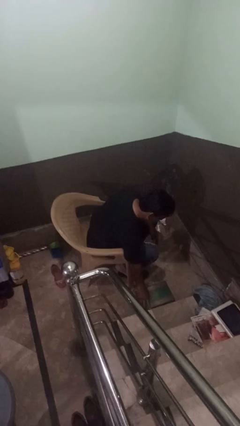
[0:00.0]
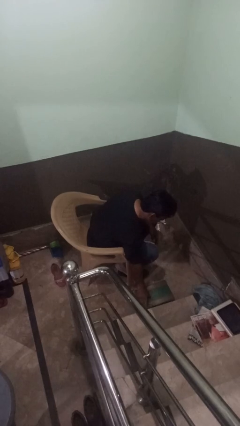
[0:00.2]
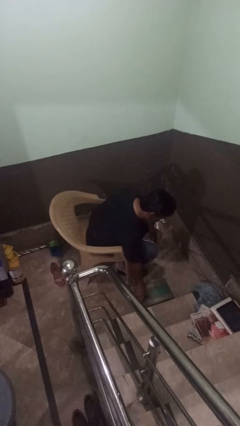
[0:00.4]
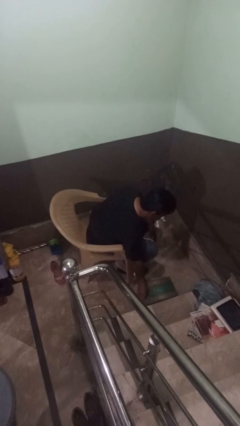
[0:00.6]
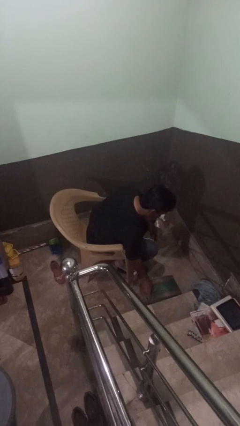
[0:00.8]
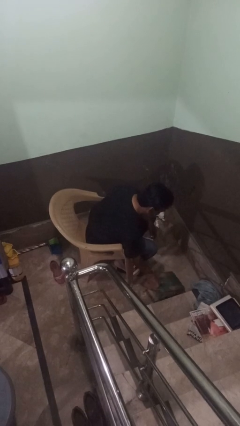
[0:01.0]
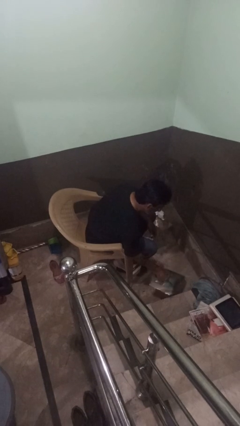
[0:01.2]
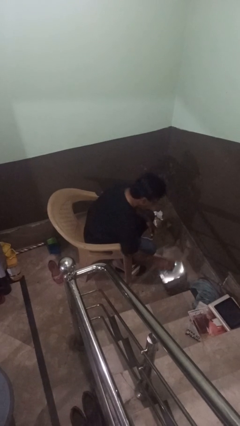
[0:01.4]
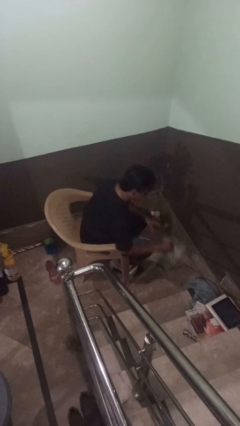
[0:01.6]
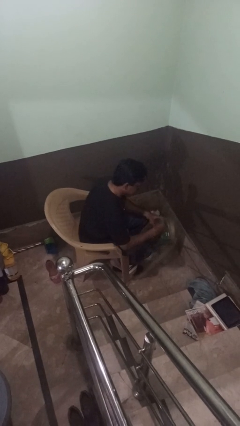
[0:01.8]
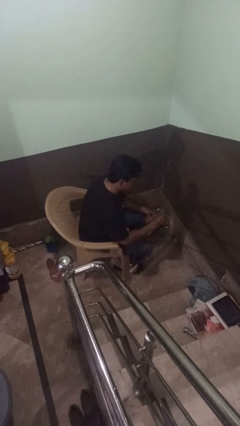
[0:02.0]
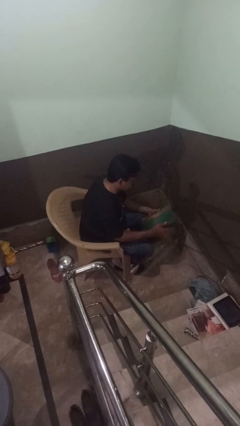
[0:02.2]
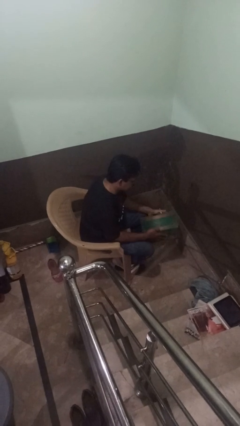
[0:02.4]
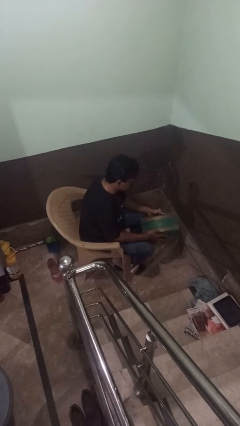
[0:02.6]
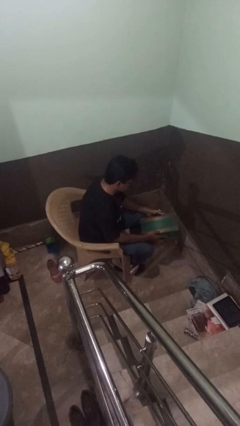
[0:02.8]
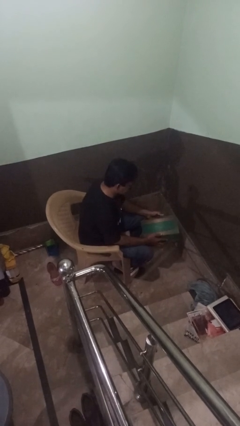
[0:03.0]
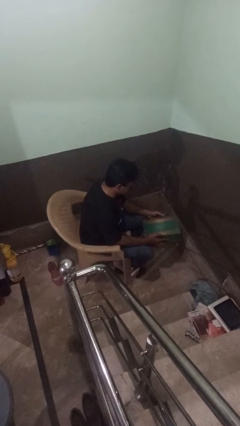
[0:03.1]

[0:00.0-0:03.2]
person picks up object from floor

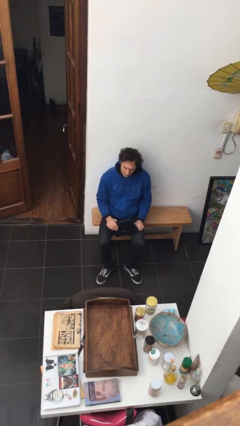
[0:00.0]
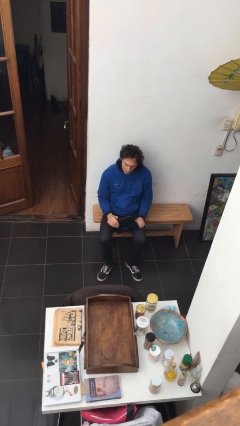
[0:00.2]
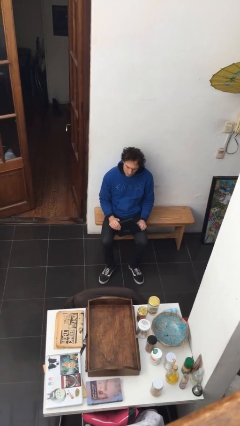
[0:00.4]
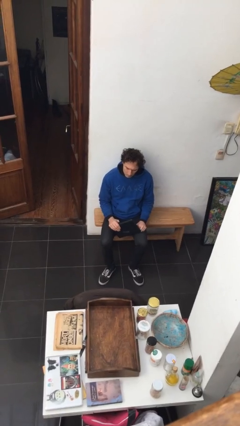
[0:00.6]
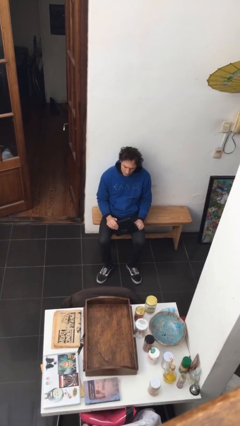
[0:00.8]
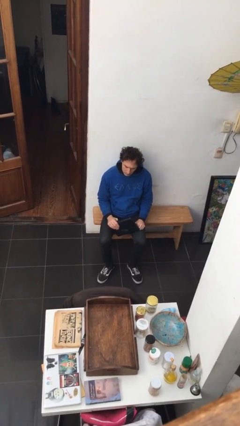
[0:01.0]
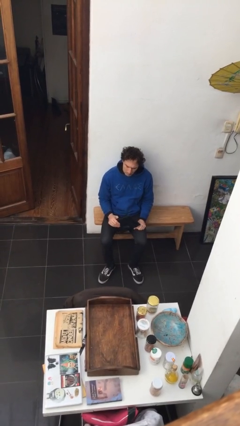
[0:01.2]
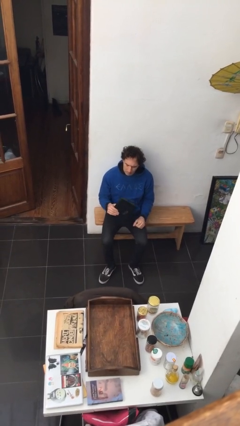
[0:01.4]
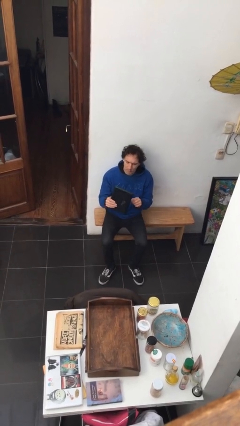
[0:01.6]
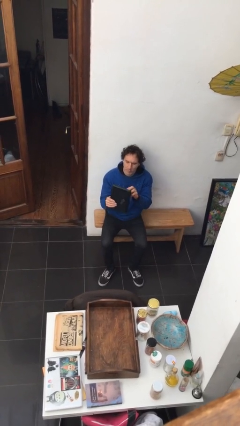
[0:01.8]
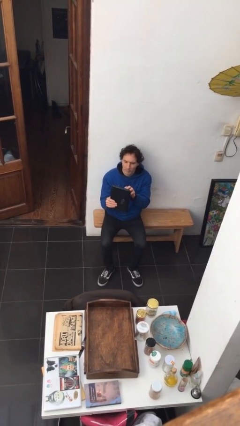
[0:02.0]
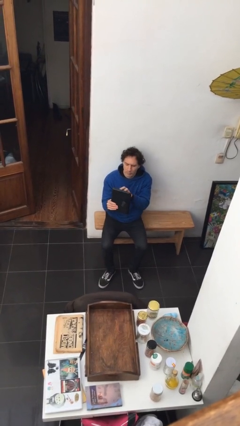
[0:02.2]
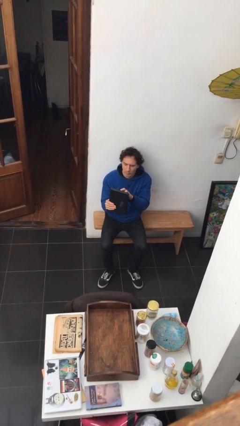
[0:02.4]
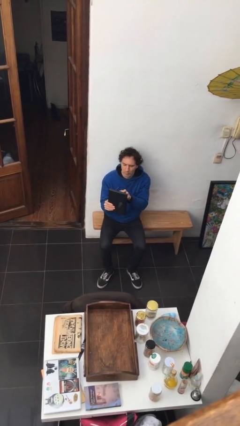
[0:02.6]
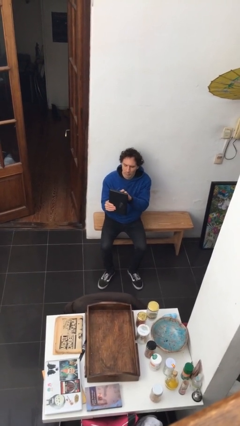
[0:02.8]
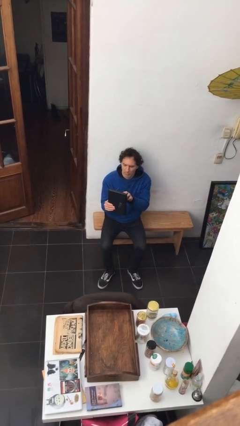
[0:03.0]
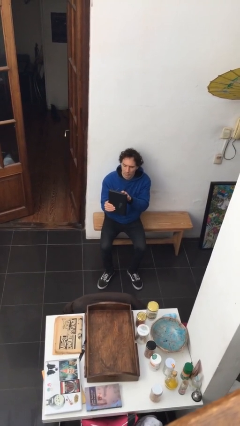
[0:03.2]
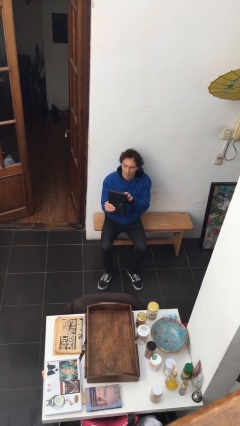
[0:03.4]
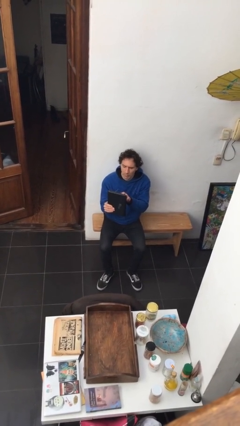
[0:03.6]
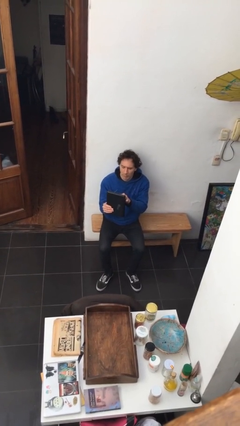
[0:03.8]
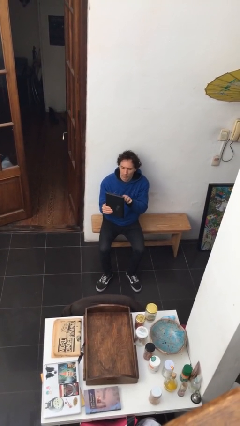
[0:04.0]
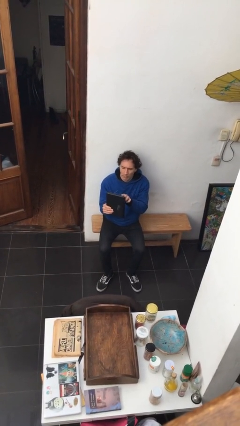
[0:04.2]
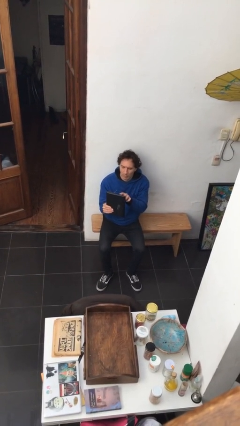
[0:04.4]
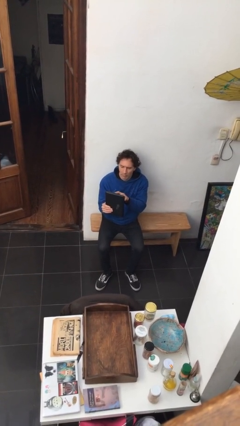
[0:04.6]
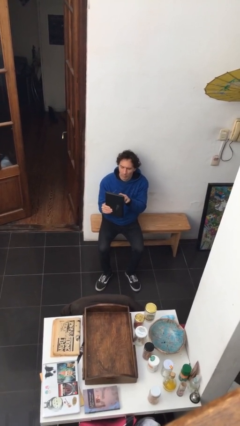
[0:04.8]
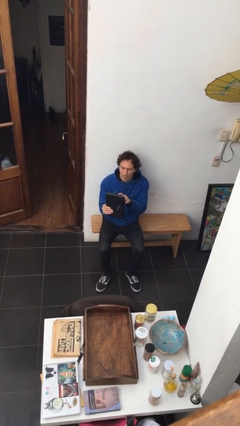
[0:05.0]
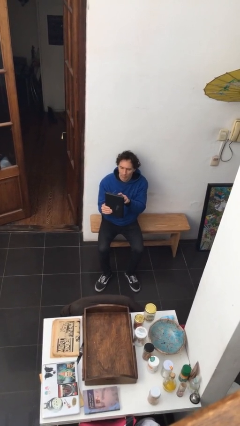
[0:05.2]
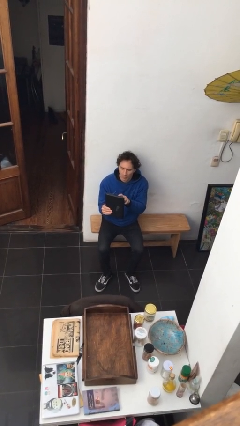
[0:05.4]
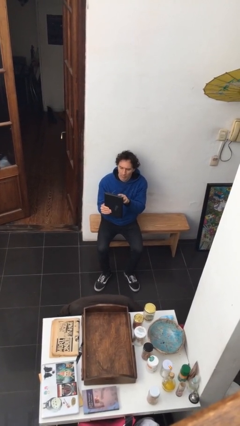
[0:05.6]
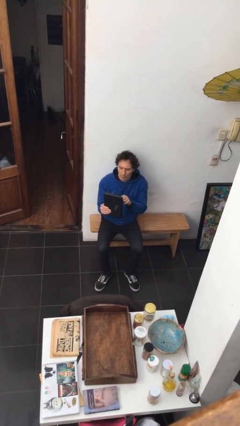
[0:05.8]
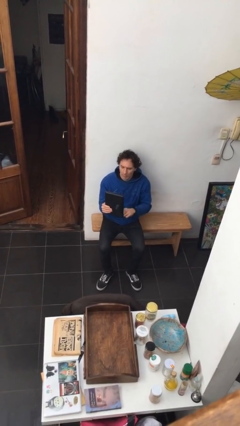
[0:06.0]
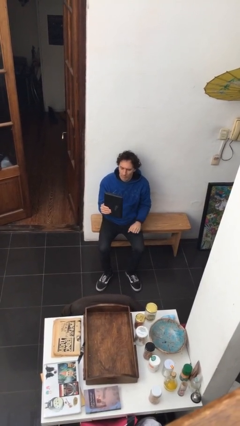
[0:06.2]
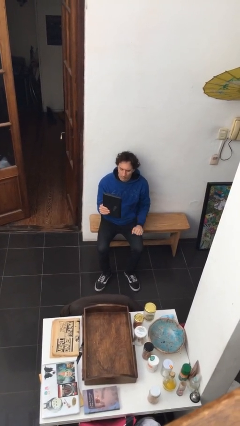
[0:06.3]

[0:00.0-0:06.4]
person interacts with tablet

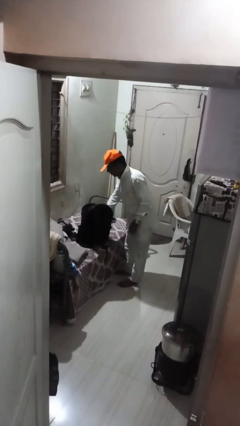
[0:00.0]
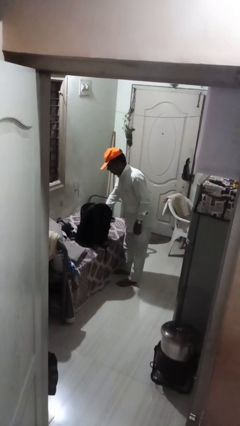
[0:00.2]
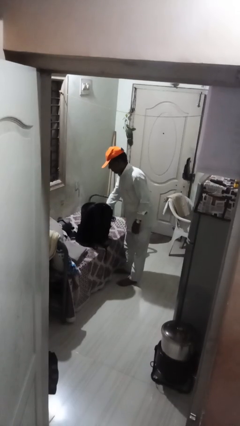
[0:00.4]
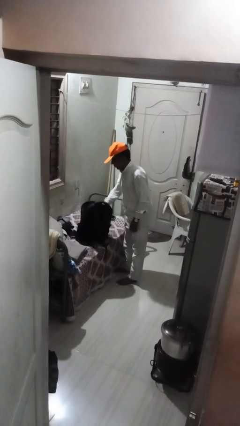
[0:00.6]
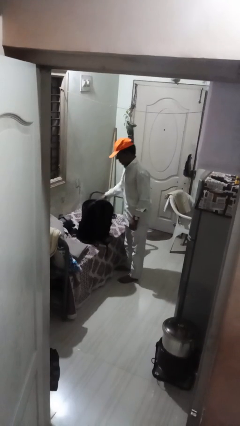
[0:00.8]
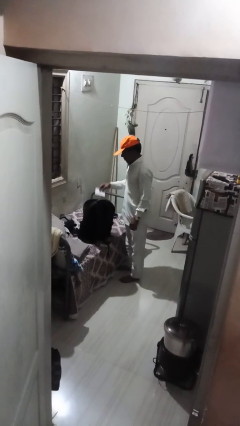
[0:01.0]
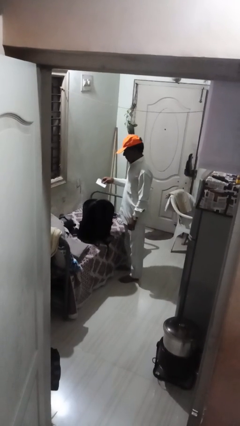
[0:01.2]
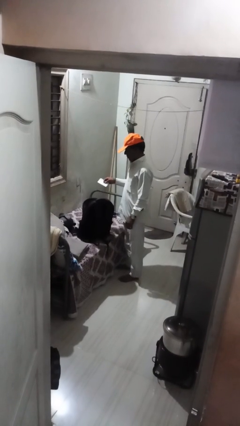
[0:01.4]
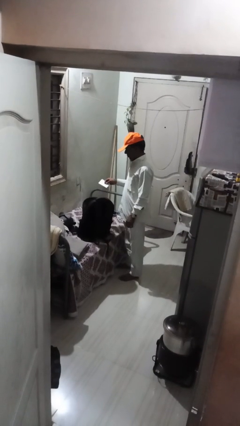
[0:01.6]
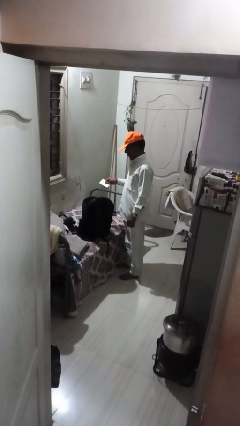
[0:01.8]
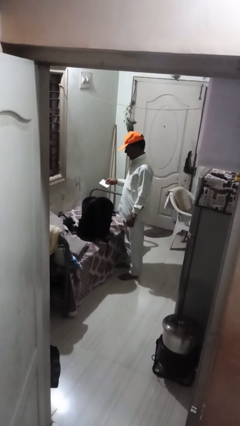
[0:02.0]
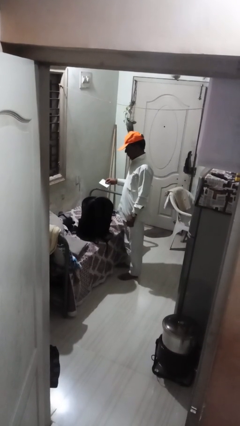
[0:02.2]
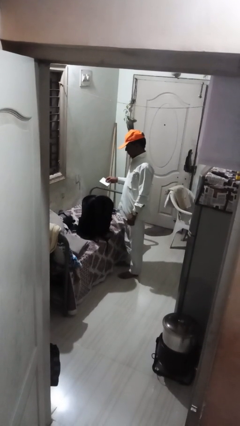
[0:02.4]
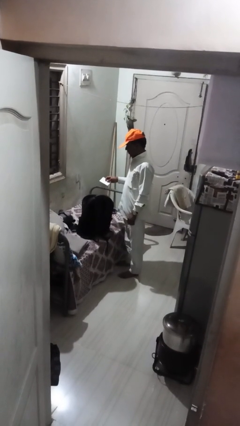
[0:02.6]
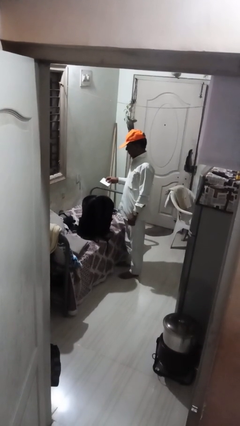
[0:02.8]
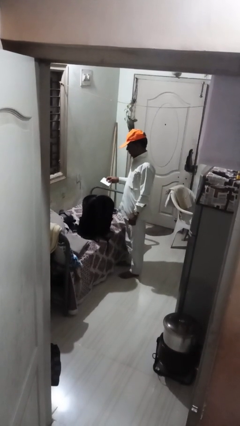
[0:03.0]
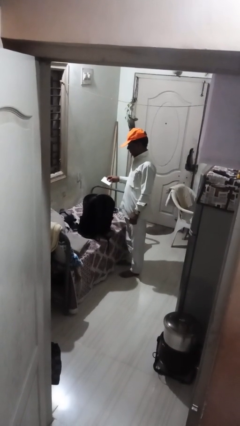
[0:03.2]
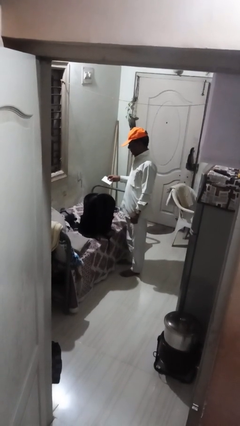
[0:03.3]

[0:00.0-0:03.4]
person takes object from backpack

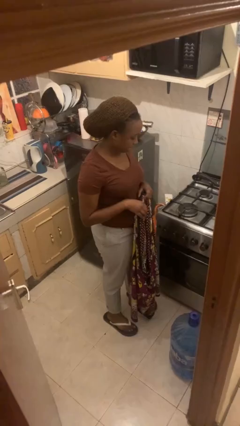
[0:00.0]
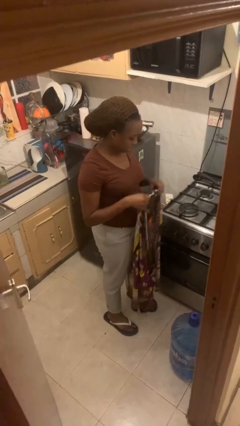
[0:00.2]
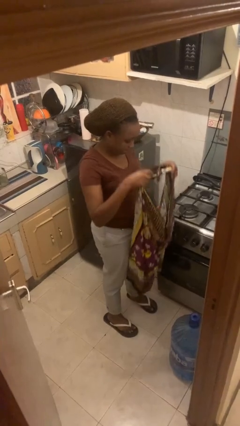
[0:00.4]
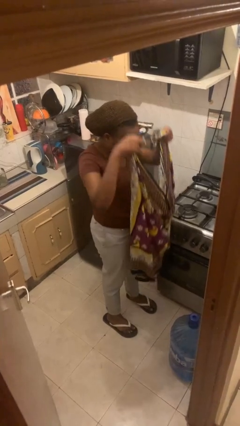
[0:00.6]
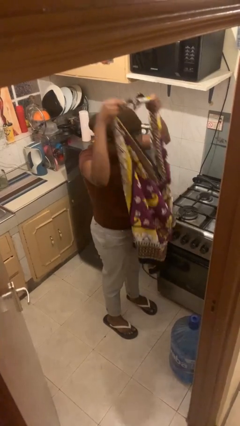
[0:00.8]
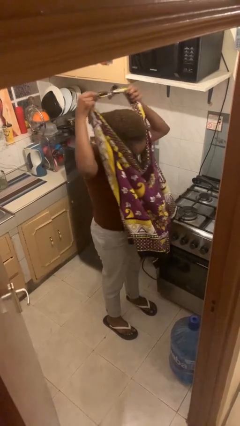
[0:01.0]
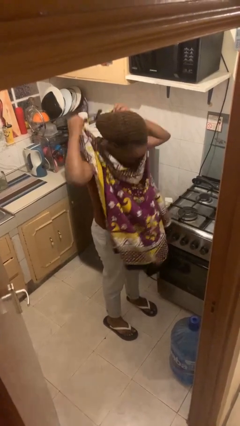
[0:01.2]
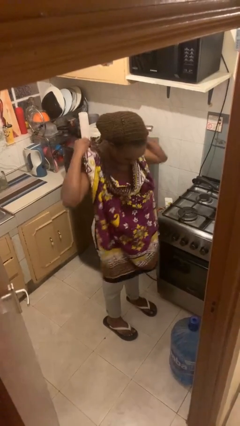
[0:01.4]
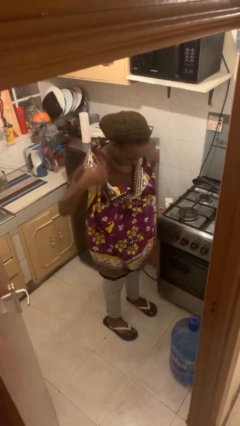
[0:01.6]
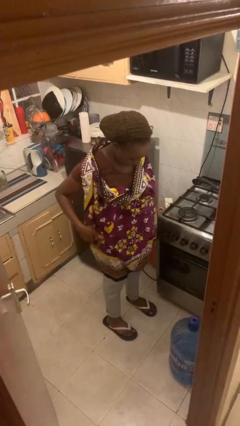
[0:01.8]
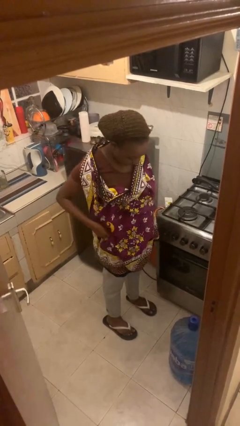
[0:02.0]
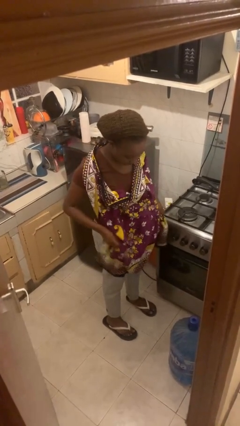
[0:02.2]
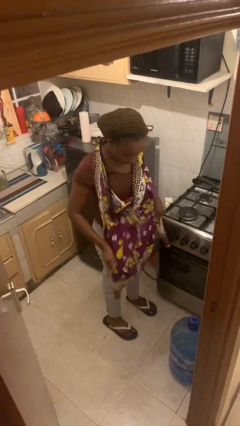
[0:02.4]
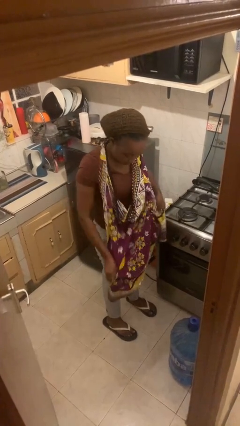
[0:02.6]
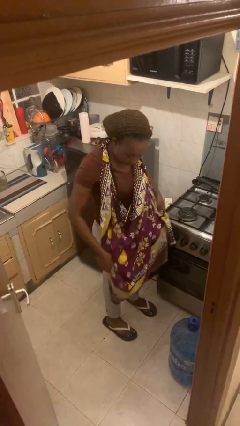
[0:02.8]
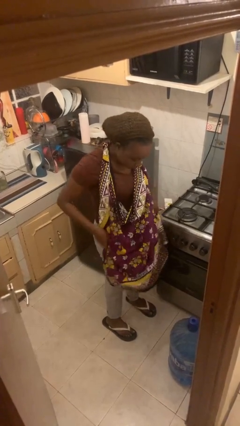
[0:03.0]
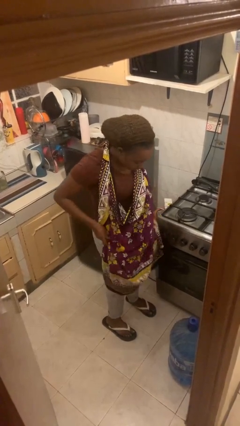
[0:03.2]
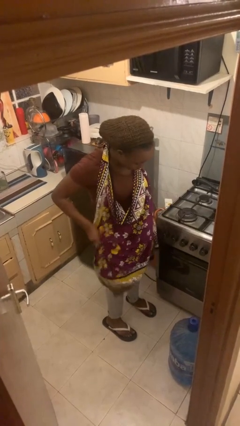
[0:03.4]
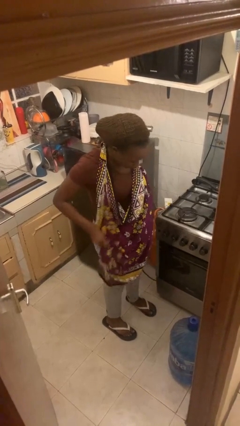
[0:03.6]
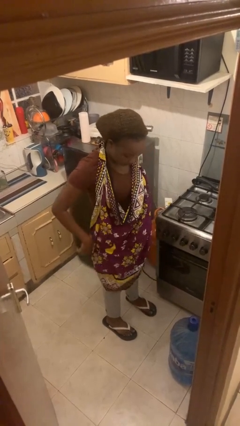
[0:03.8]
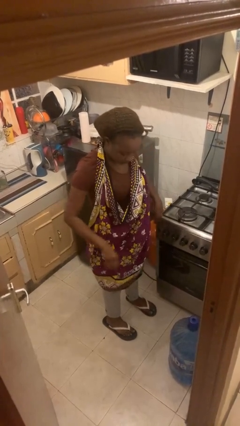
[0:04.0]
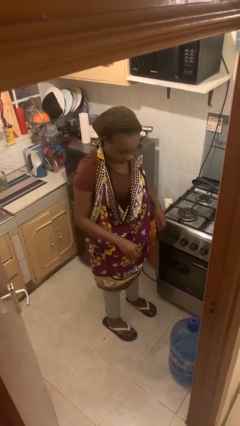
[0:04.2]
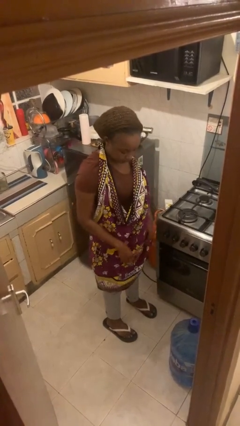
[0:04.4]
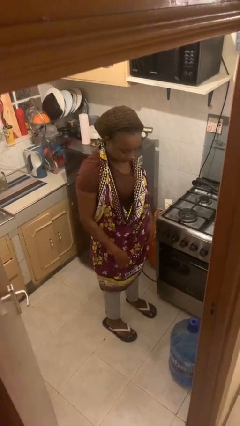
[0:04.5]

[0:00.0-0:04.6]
person puts on apron

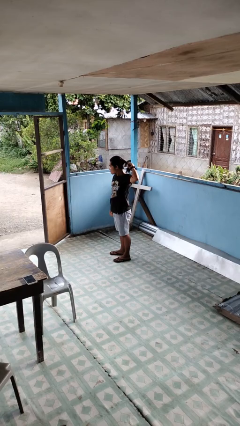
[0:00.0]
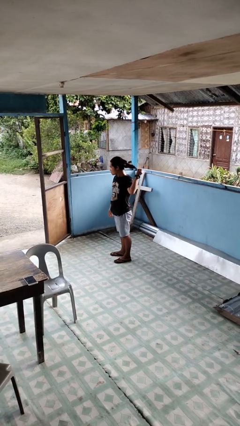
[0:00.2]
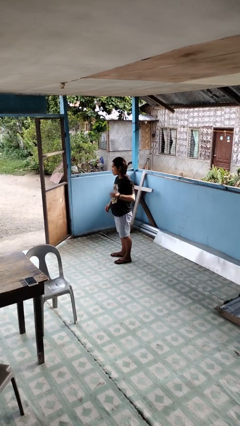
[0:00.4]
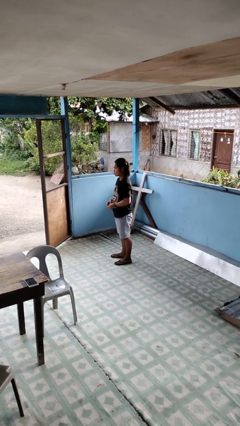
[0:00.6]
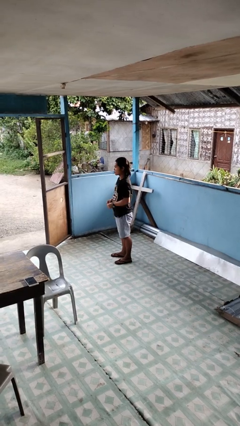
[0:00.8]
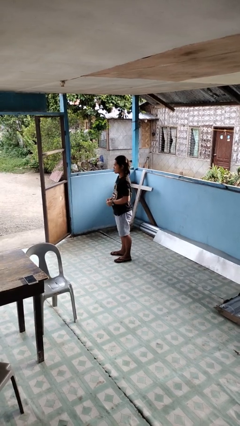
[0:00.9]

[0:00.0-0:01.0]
person takes off hairtie
